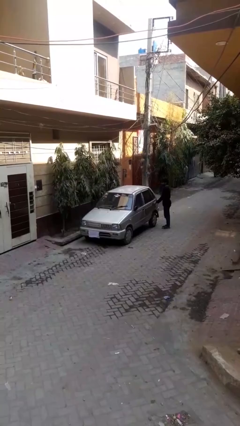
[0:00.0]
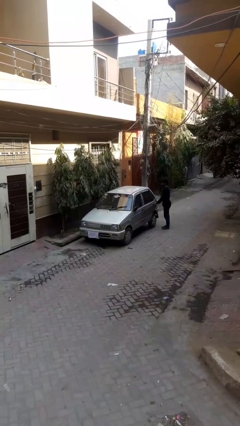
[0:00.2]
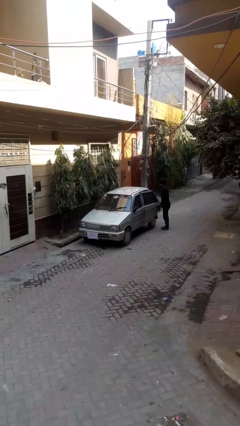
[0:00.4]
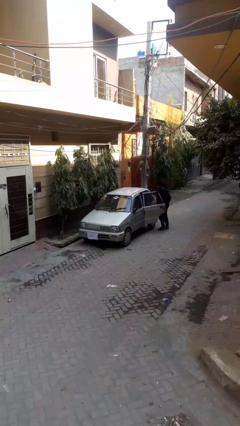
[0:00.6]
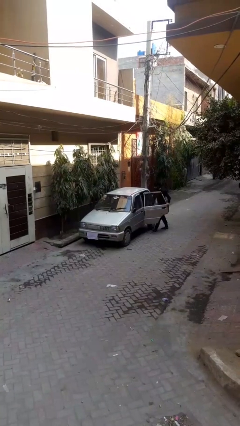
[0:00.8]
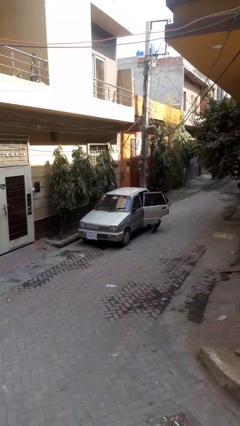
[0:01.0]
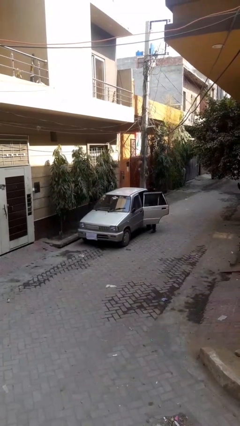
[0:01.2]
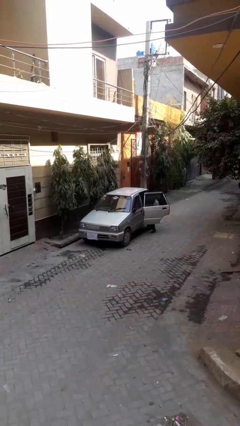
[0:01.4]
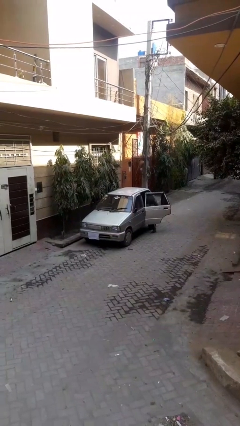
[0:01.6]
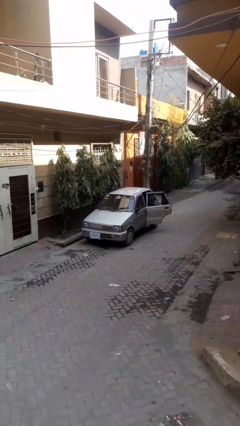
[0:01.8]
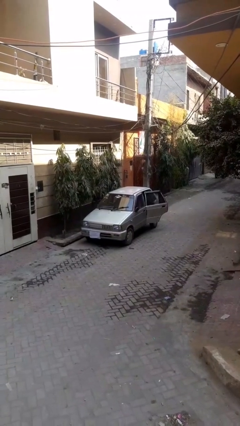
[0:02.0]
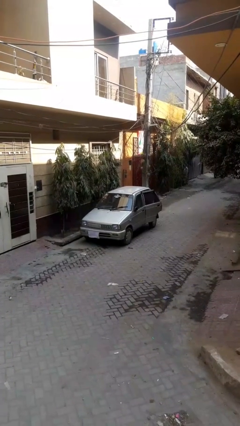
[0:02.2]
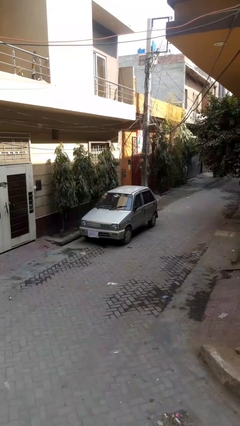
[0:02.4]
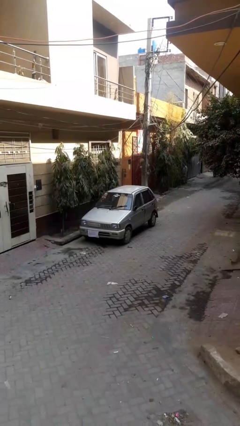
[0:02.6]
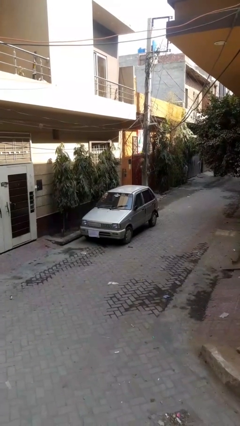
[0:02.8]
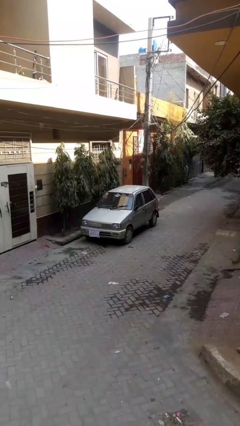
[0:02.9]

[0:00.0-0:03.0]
car picks up person

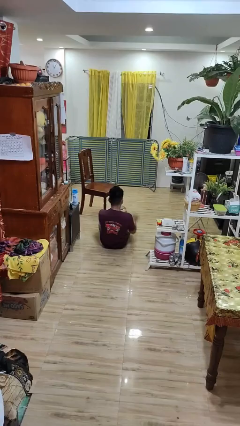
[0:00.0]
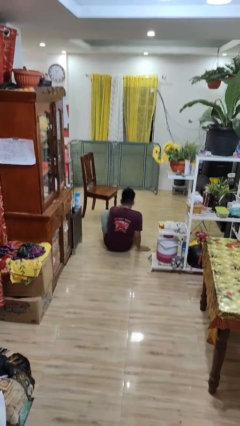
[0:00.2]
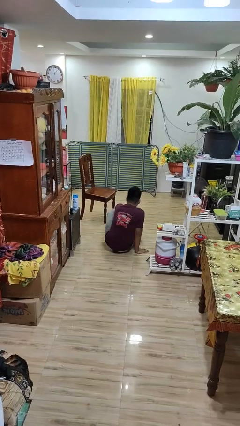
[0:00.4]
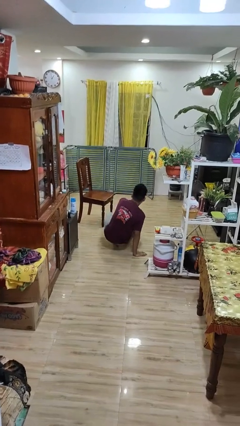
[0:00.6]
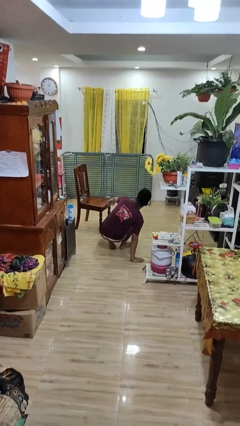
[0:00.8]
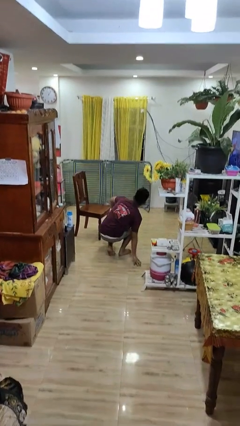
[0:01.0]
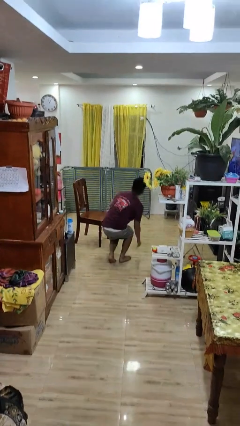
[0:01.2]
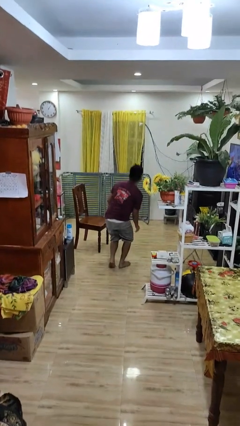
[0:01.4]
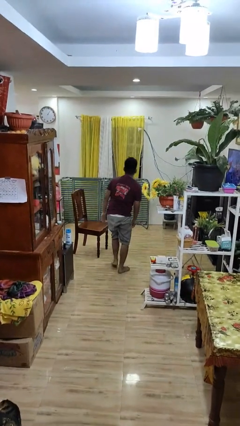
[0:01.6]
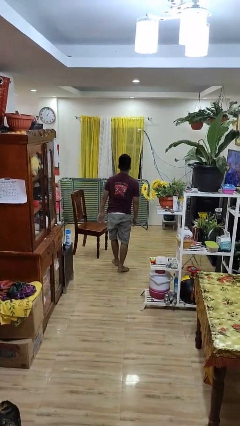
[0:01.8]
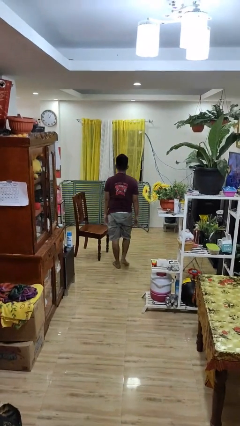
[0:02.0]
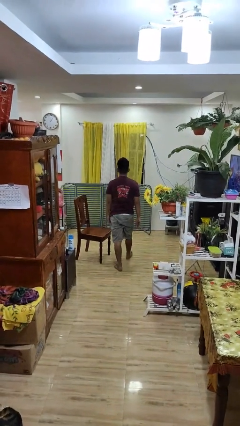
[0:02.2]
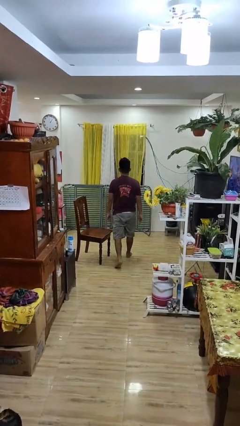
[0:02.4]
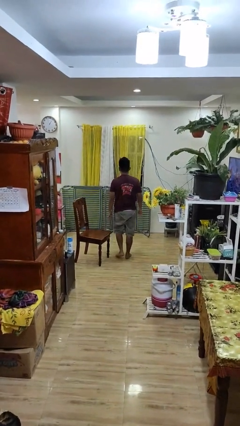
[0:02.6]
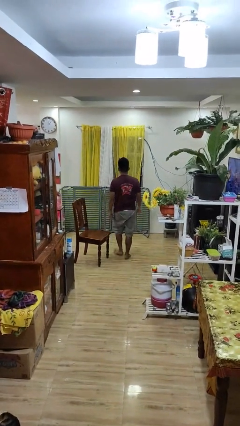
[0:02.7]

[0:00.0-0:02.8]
person stands up from floor

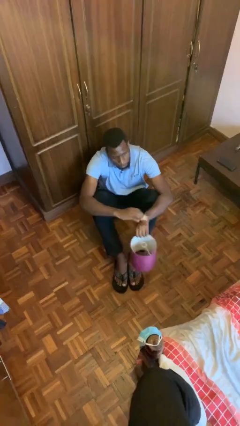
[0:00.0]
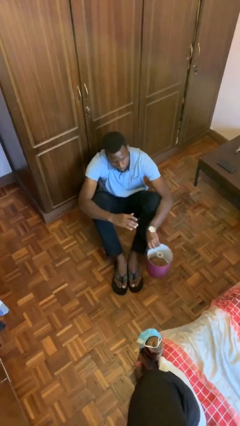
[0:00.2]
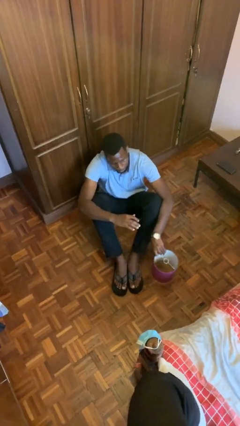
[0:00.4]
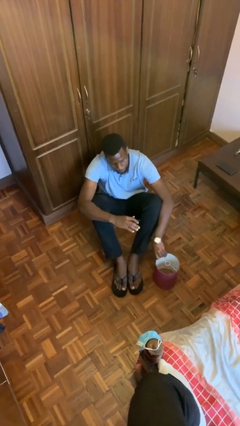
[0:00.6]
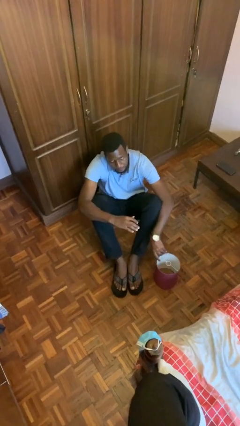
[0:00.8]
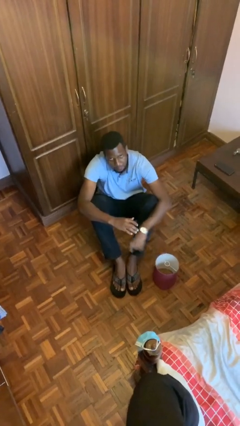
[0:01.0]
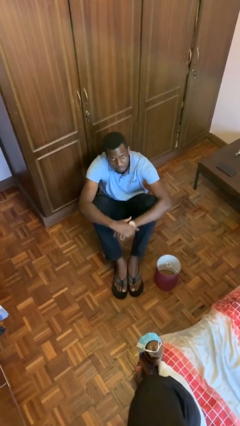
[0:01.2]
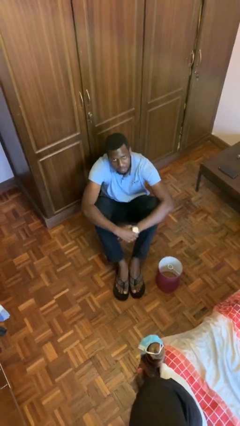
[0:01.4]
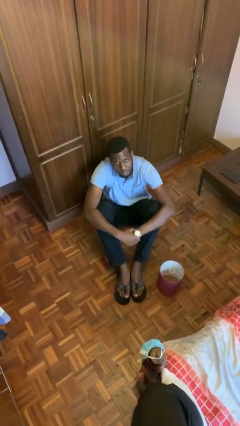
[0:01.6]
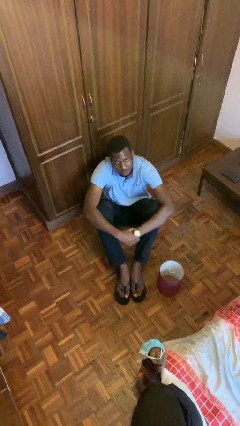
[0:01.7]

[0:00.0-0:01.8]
person puts down object on floor

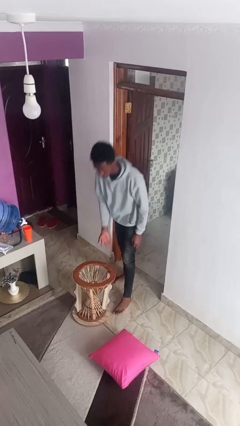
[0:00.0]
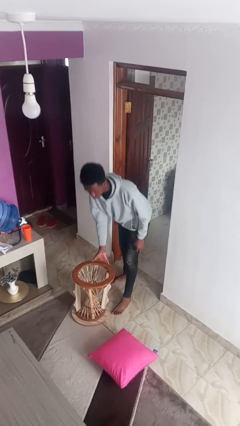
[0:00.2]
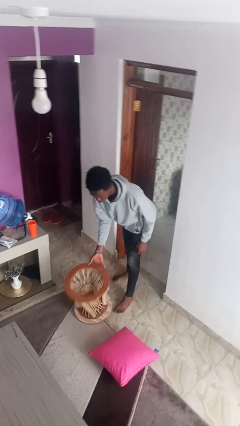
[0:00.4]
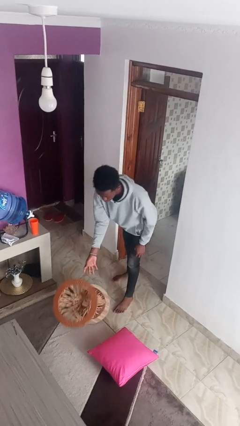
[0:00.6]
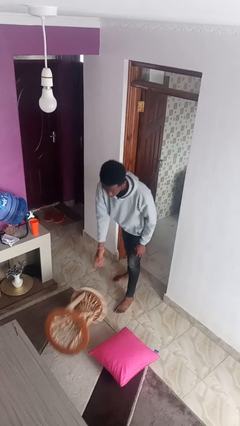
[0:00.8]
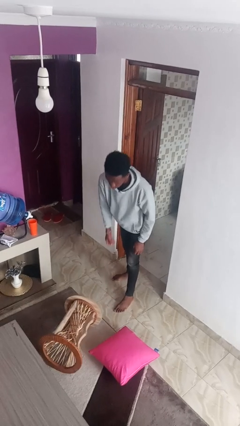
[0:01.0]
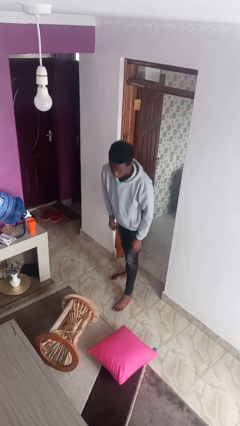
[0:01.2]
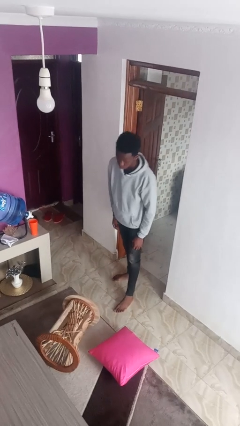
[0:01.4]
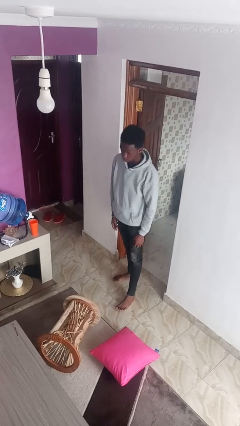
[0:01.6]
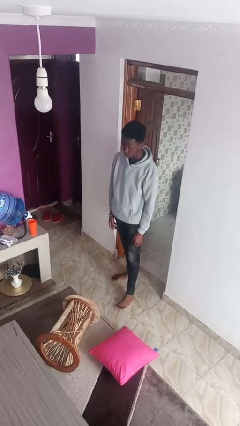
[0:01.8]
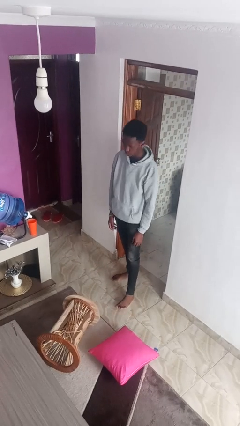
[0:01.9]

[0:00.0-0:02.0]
person knocks over furniture

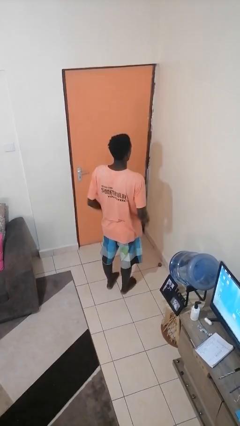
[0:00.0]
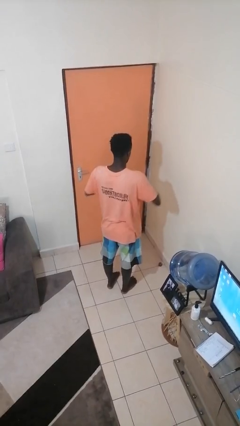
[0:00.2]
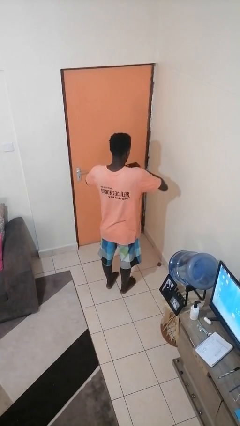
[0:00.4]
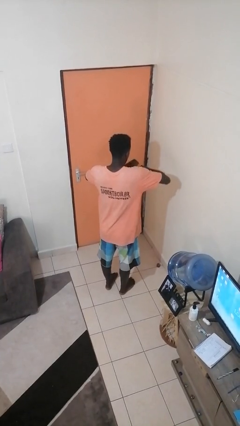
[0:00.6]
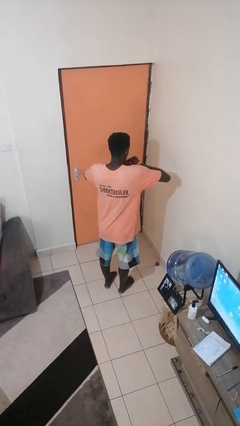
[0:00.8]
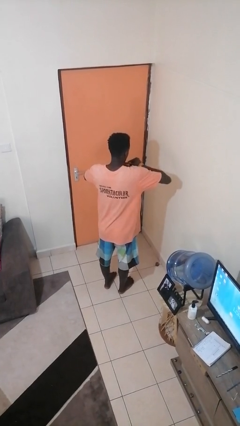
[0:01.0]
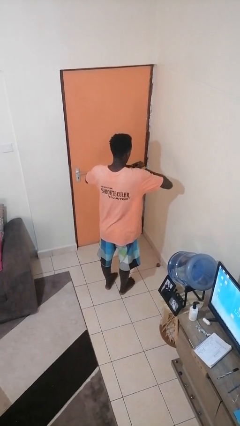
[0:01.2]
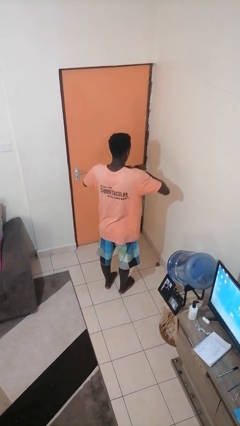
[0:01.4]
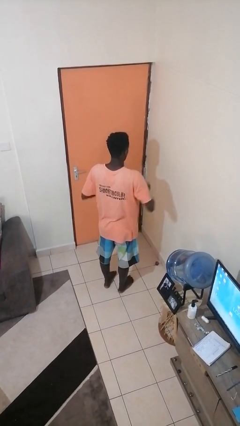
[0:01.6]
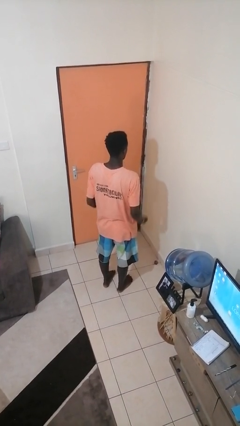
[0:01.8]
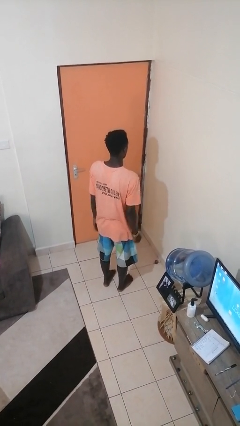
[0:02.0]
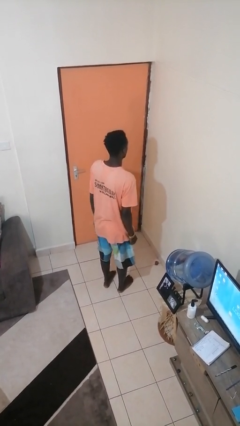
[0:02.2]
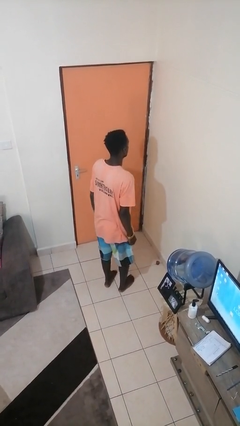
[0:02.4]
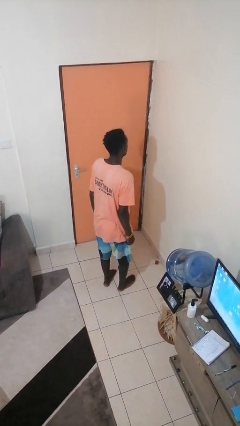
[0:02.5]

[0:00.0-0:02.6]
person takes off ring

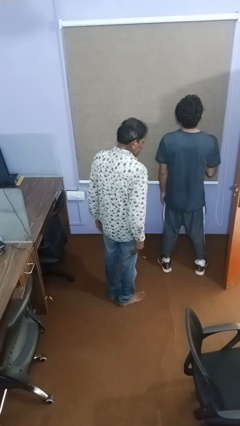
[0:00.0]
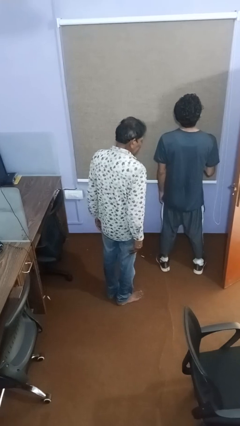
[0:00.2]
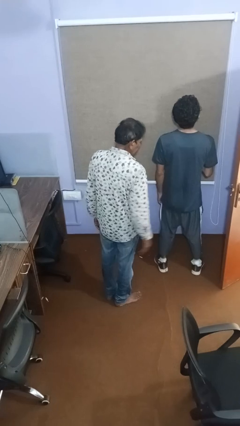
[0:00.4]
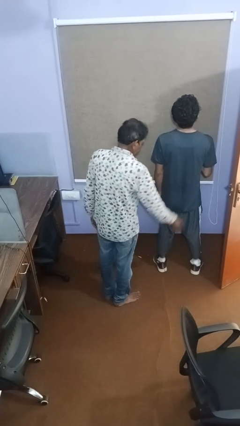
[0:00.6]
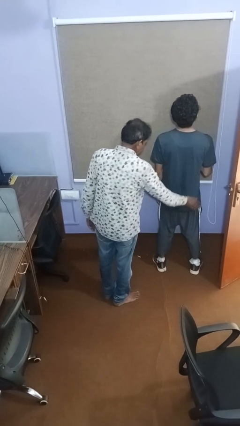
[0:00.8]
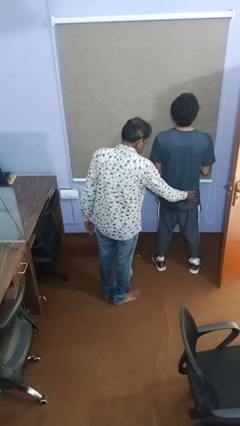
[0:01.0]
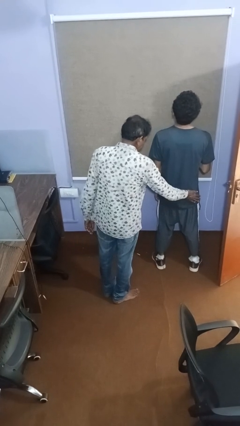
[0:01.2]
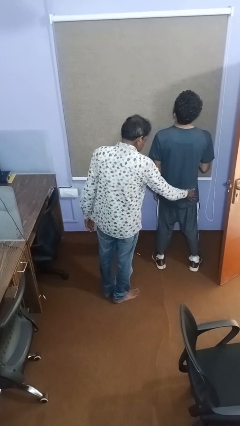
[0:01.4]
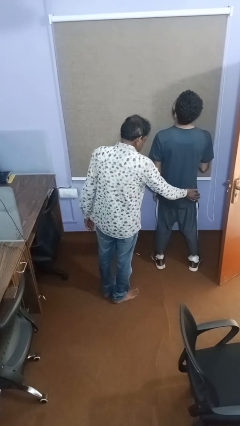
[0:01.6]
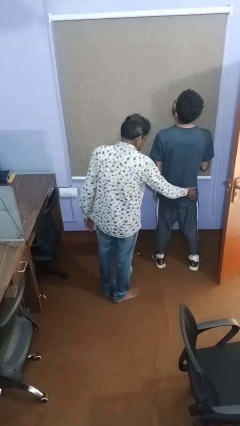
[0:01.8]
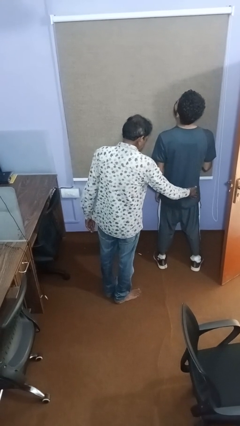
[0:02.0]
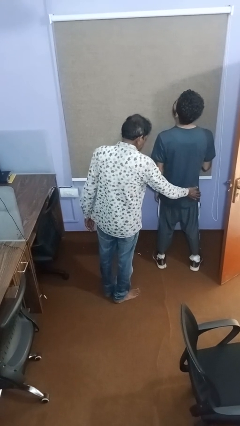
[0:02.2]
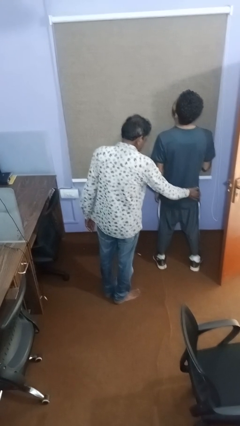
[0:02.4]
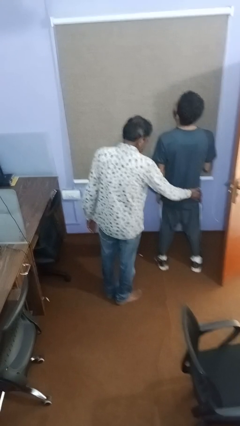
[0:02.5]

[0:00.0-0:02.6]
person touches back of person

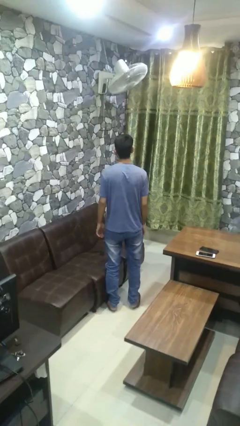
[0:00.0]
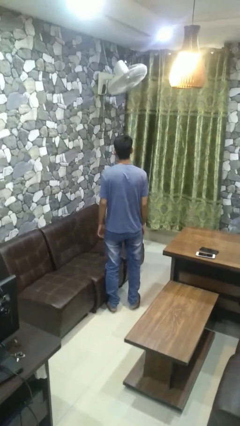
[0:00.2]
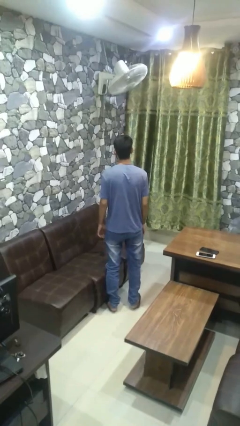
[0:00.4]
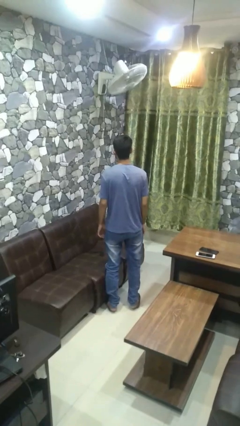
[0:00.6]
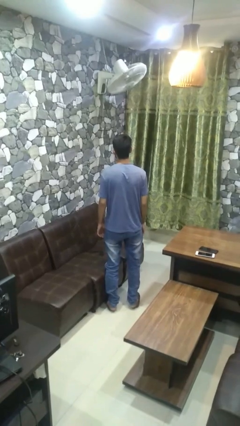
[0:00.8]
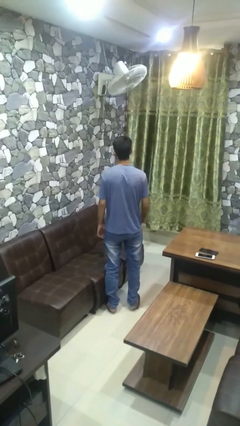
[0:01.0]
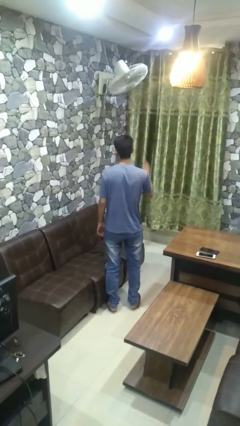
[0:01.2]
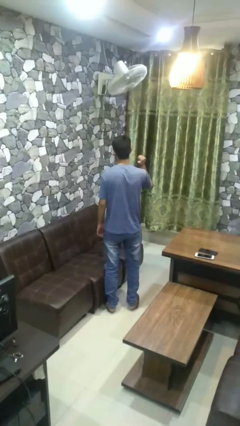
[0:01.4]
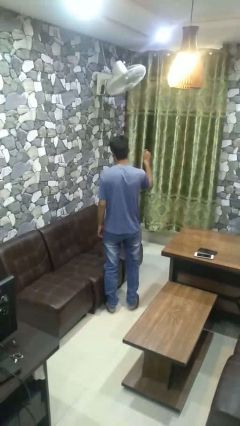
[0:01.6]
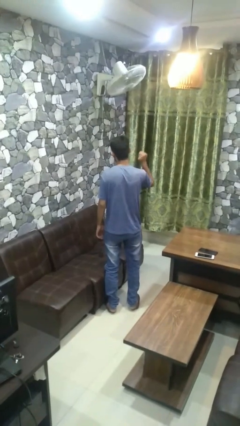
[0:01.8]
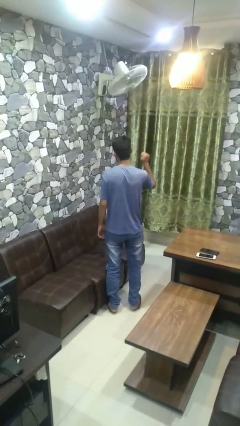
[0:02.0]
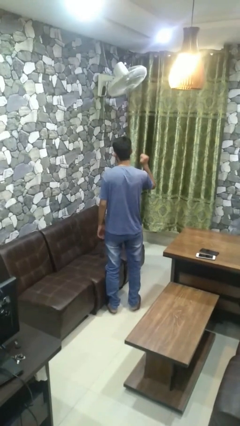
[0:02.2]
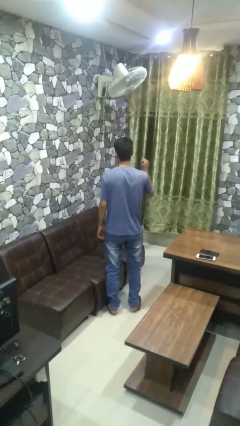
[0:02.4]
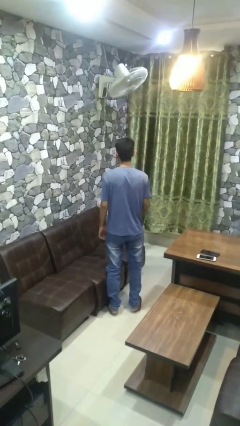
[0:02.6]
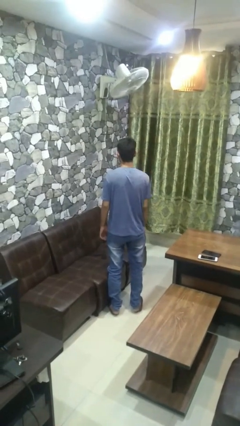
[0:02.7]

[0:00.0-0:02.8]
person gestures behind me
